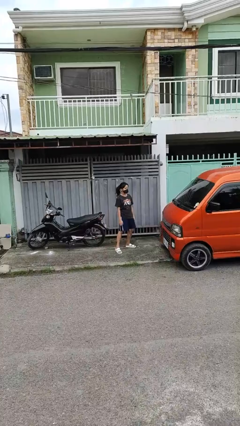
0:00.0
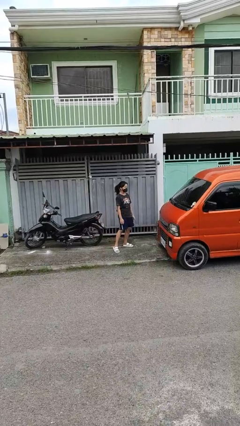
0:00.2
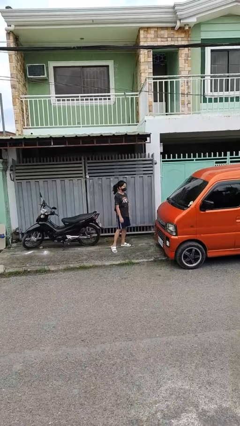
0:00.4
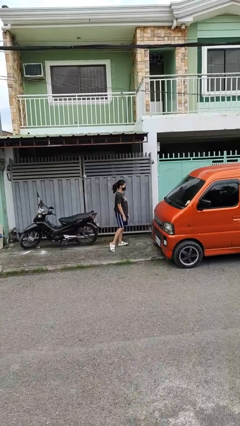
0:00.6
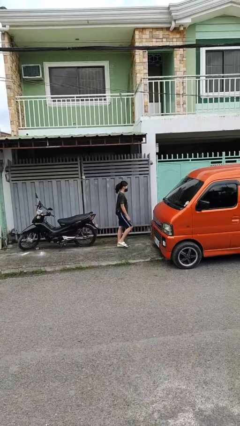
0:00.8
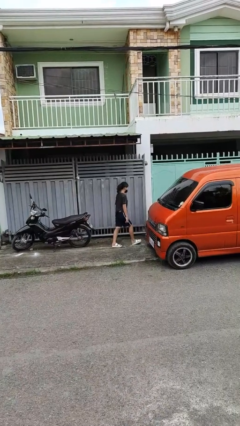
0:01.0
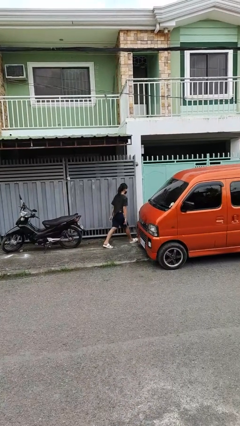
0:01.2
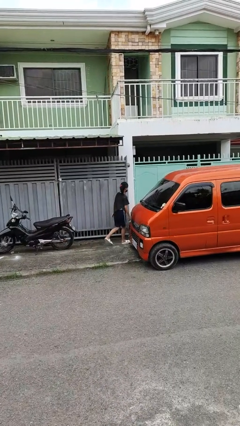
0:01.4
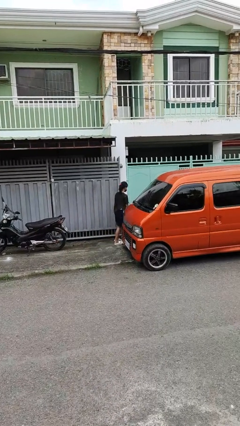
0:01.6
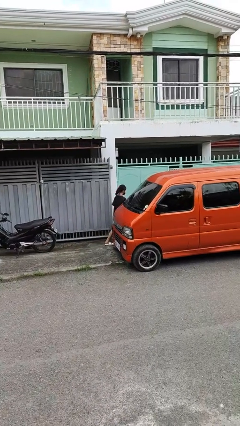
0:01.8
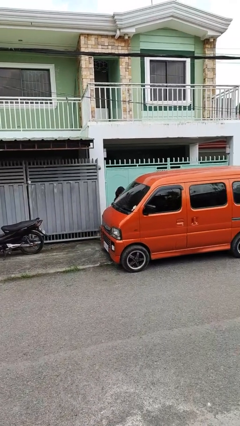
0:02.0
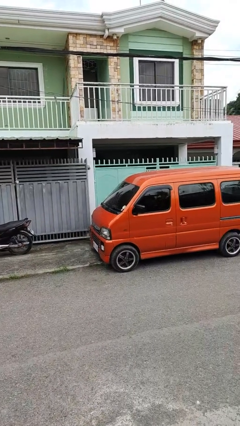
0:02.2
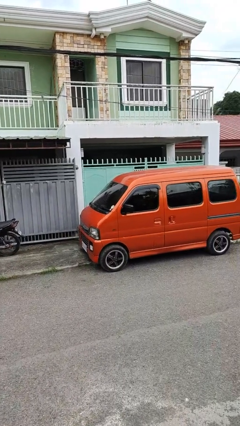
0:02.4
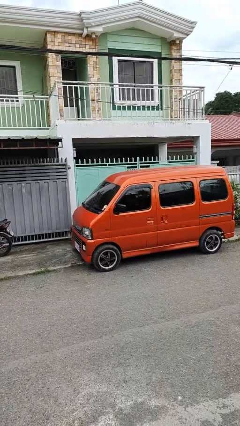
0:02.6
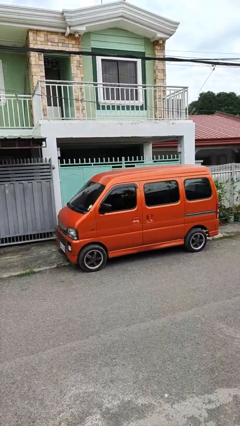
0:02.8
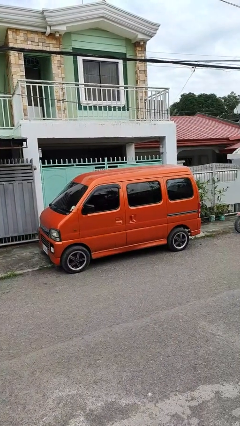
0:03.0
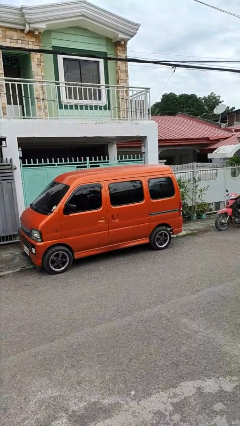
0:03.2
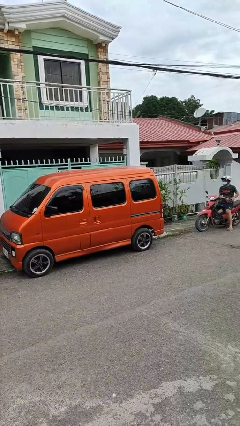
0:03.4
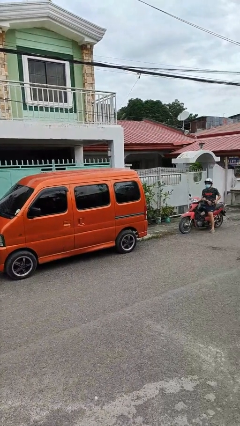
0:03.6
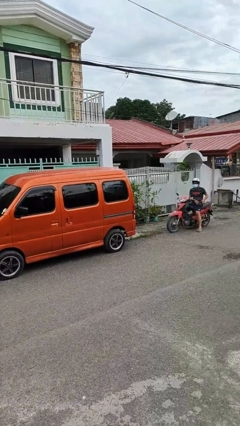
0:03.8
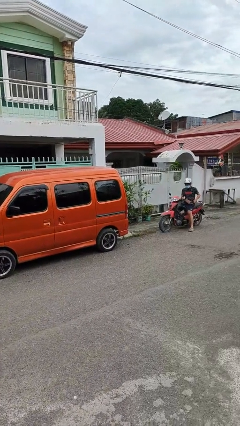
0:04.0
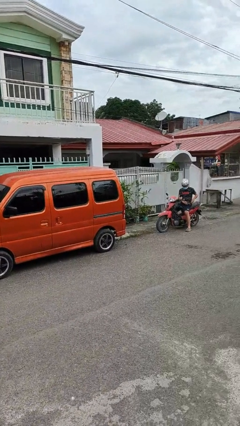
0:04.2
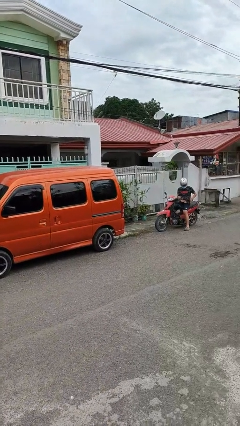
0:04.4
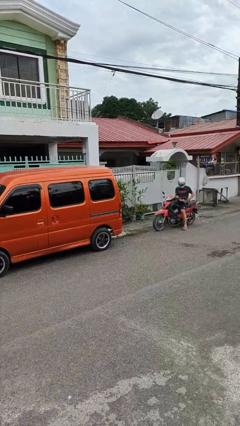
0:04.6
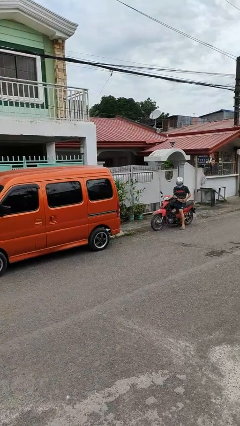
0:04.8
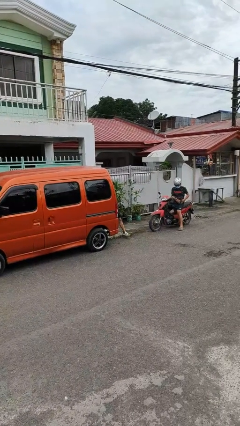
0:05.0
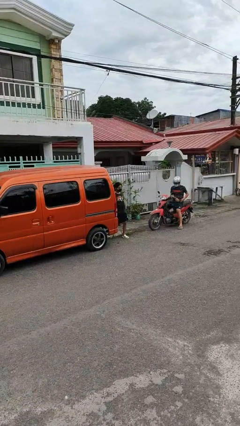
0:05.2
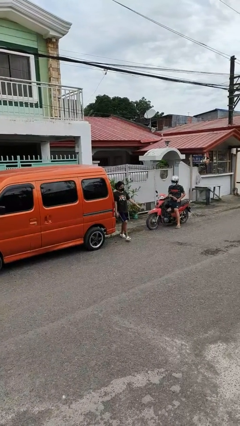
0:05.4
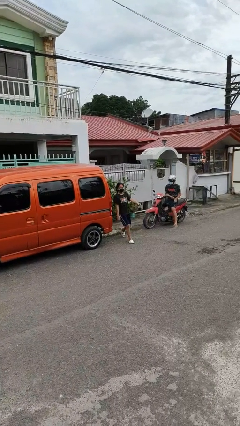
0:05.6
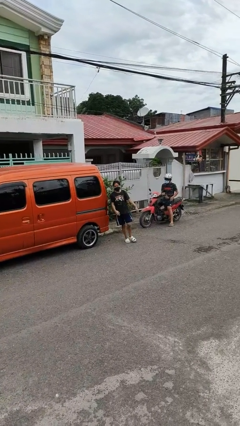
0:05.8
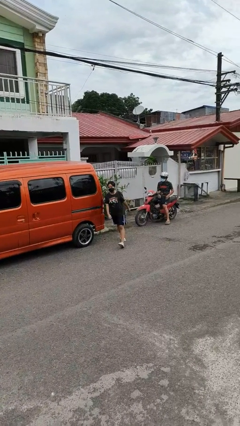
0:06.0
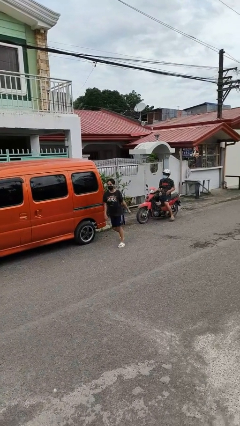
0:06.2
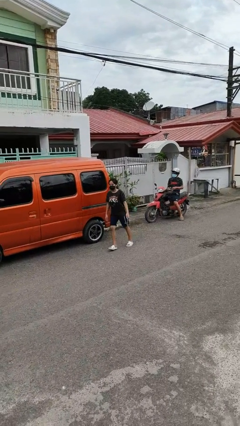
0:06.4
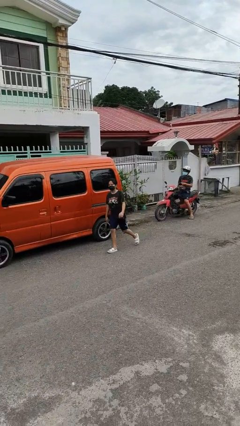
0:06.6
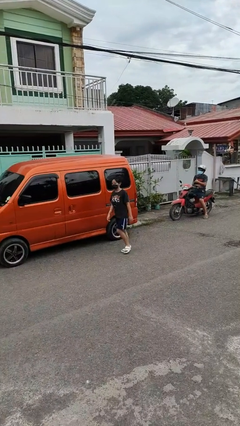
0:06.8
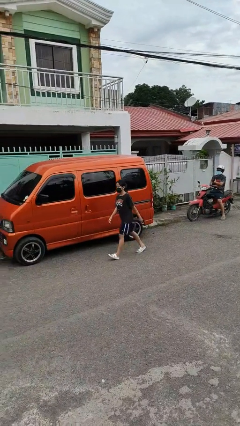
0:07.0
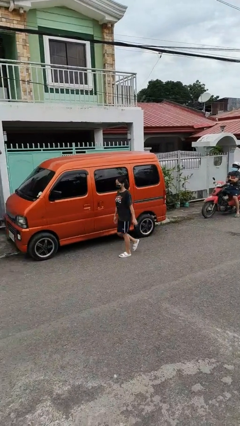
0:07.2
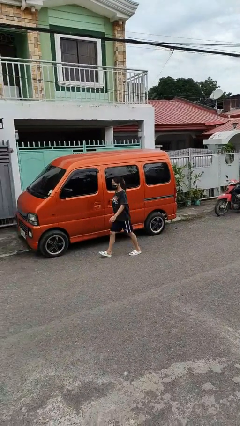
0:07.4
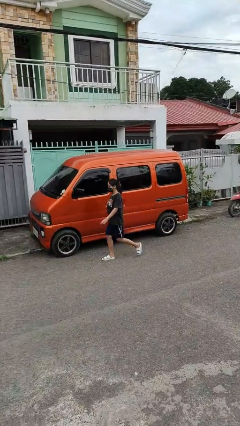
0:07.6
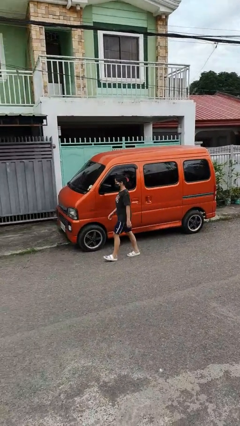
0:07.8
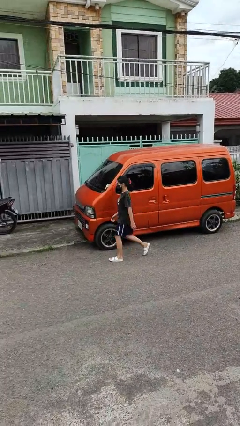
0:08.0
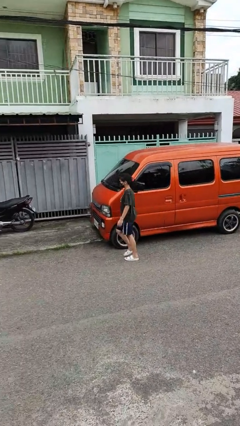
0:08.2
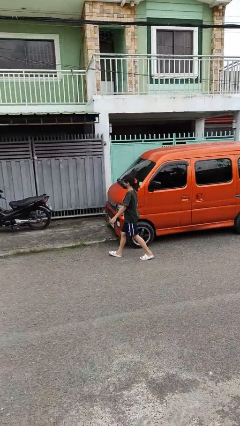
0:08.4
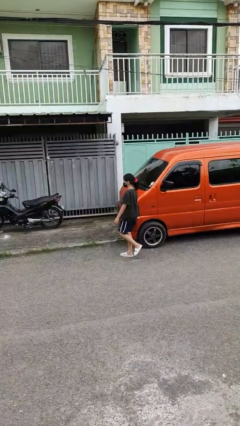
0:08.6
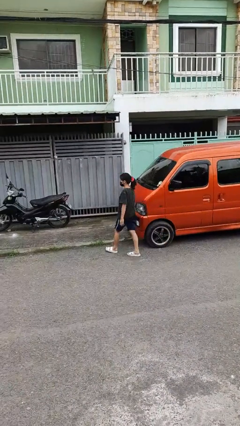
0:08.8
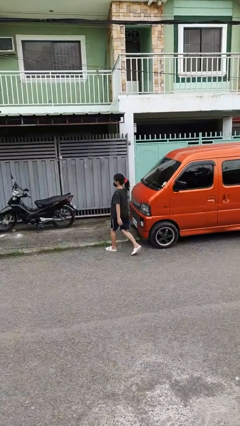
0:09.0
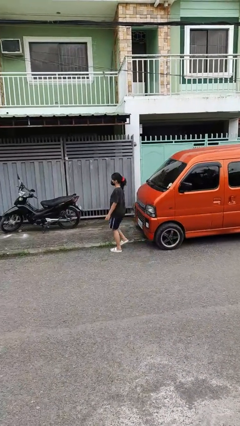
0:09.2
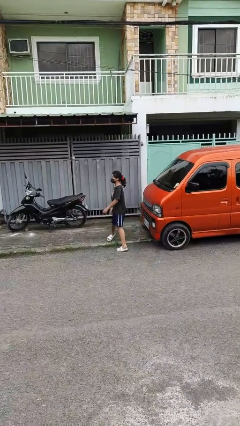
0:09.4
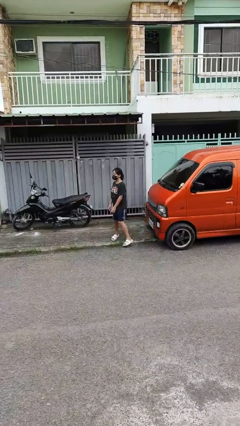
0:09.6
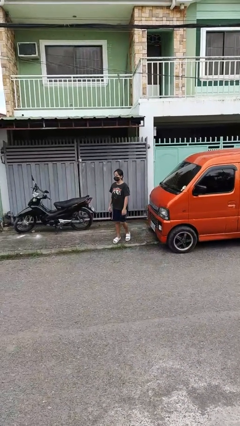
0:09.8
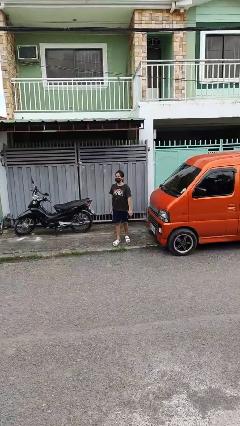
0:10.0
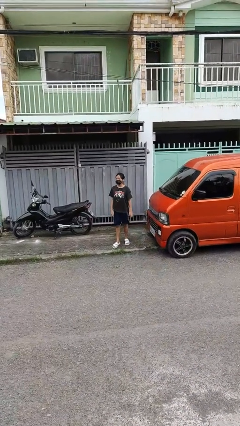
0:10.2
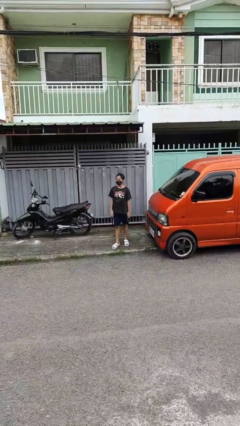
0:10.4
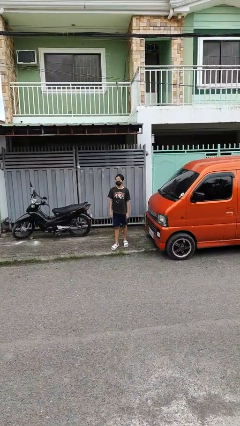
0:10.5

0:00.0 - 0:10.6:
person walks around car

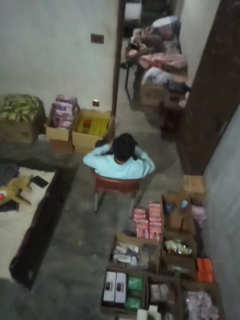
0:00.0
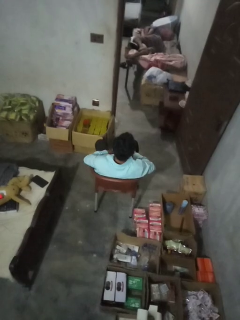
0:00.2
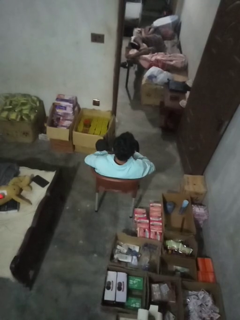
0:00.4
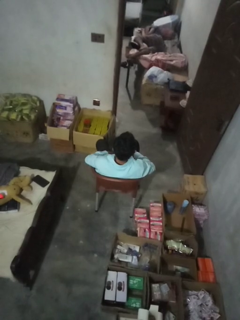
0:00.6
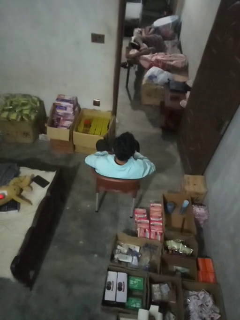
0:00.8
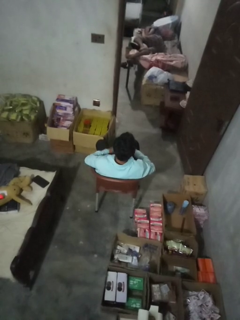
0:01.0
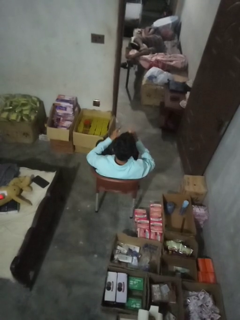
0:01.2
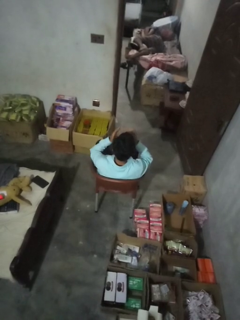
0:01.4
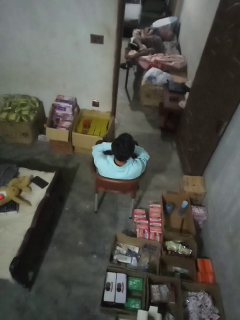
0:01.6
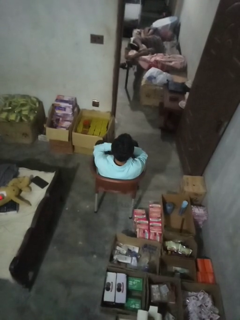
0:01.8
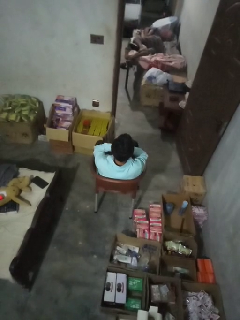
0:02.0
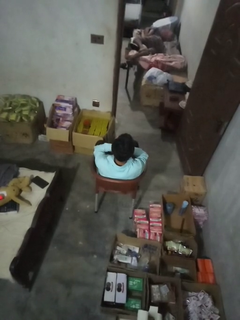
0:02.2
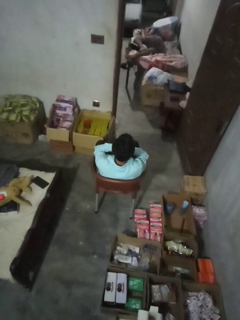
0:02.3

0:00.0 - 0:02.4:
person covers face with hands

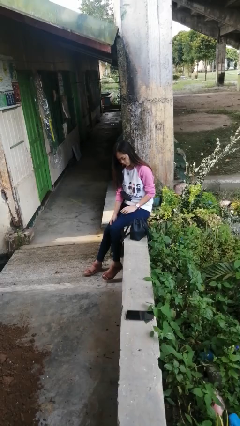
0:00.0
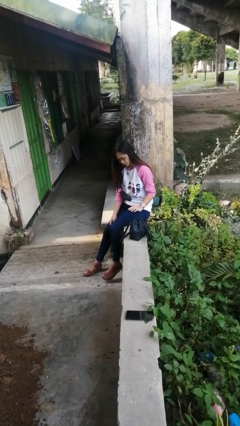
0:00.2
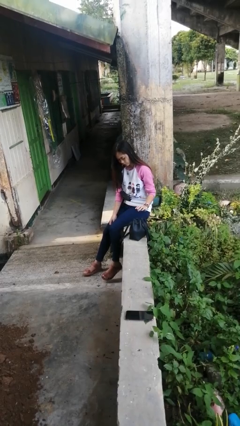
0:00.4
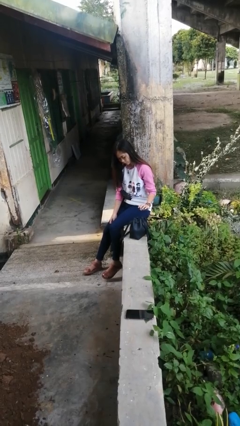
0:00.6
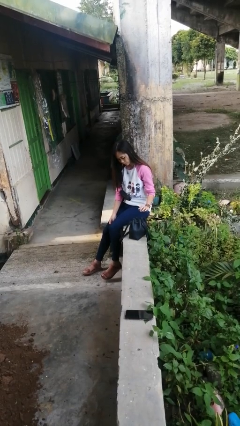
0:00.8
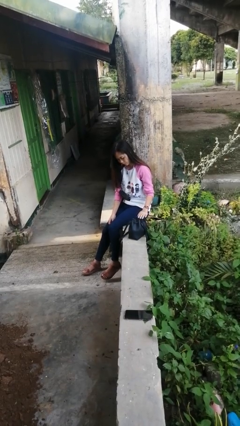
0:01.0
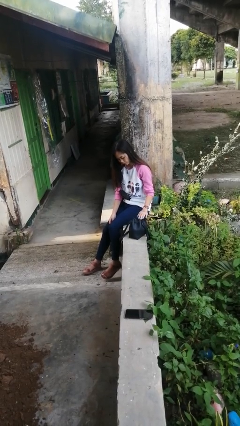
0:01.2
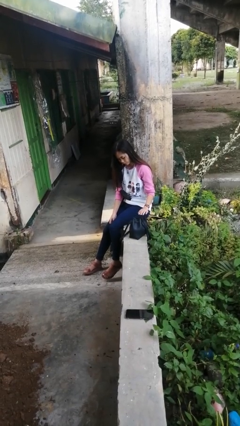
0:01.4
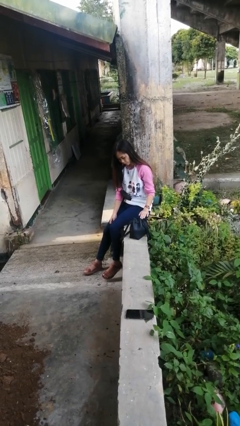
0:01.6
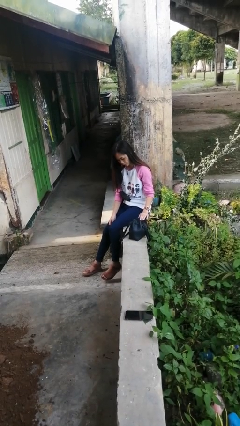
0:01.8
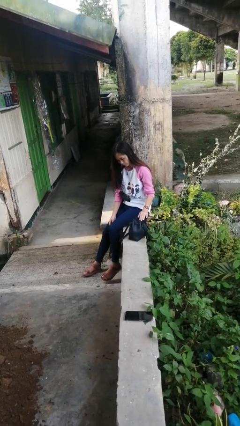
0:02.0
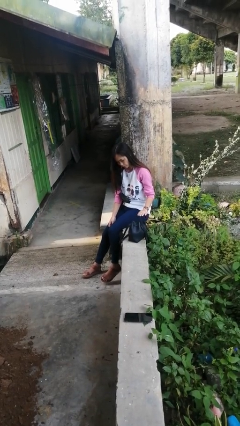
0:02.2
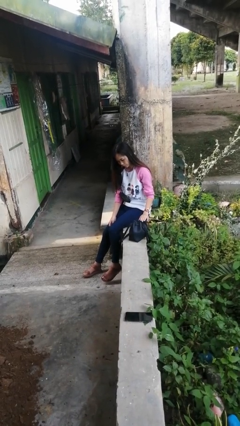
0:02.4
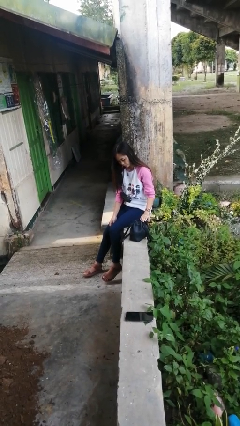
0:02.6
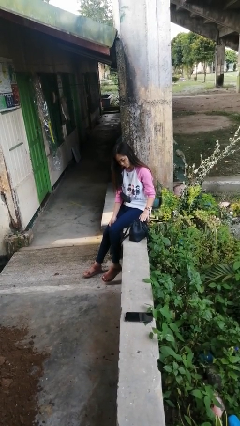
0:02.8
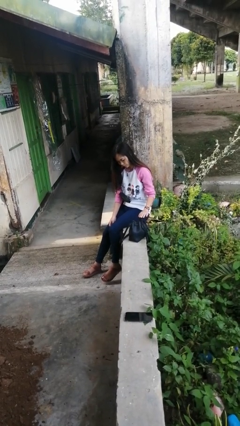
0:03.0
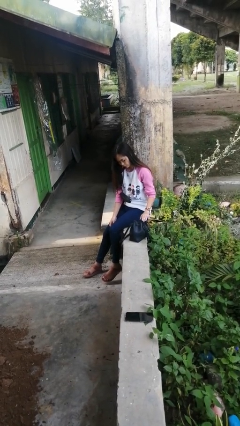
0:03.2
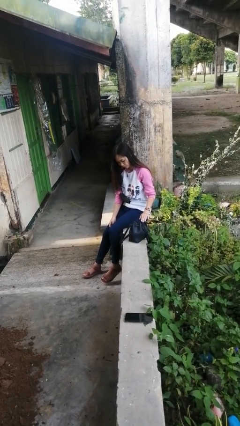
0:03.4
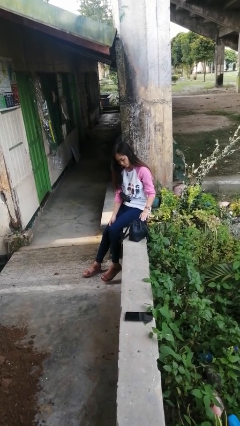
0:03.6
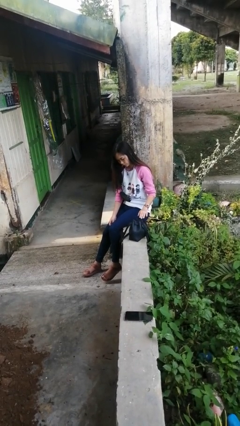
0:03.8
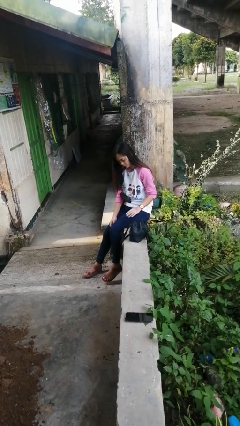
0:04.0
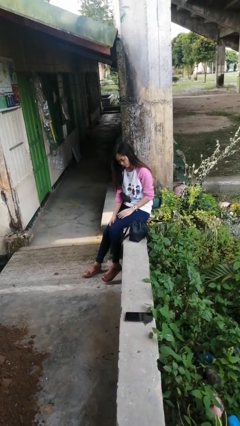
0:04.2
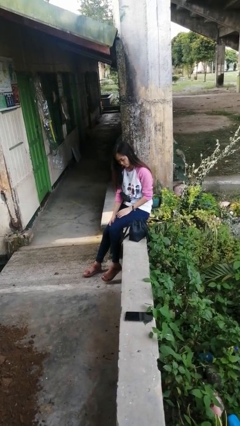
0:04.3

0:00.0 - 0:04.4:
person taps object with finger

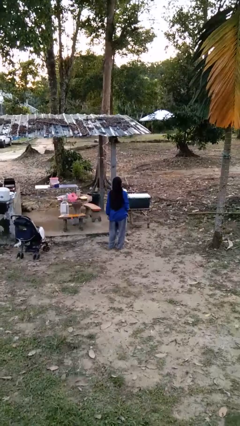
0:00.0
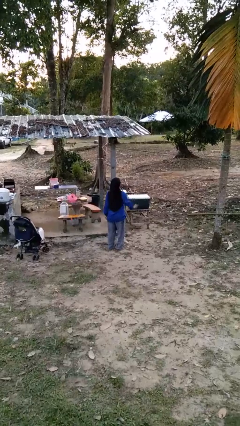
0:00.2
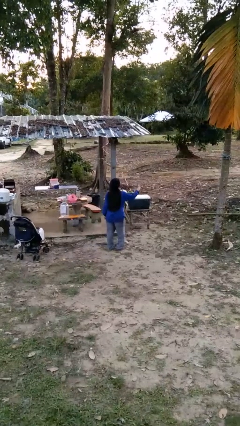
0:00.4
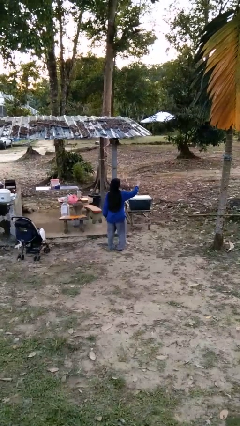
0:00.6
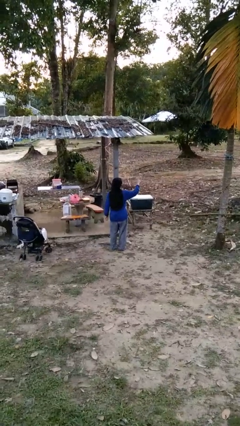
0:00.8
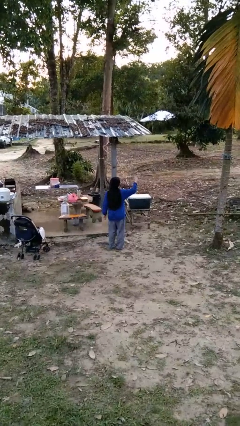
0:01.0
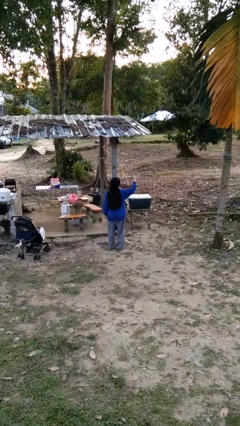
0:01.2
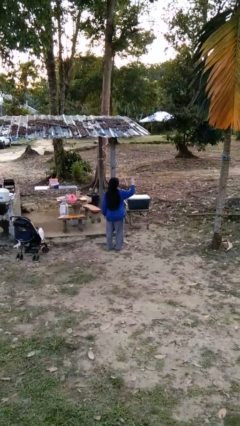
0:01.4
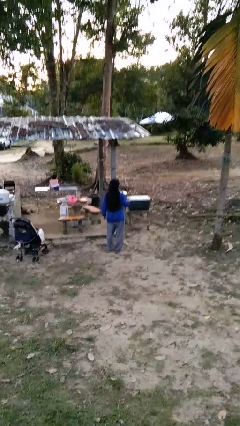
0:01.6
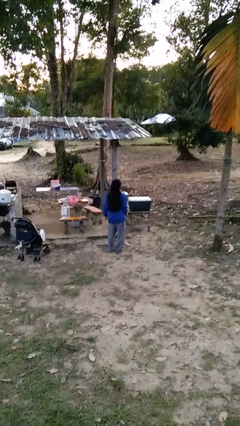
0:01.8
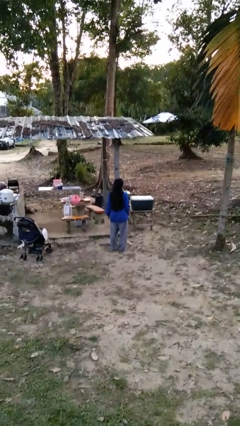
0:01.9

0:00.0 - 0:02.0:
person gestures number three
